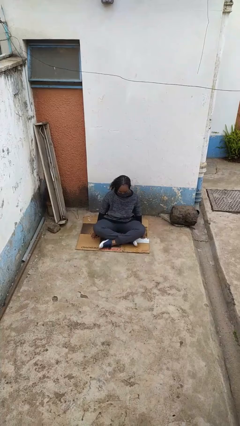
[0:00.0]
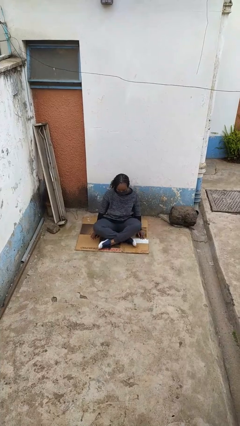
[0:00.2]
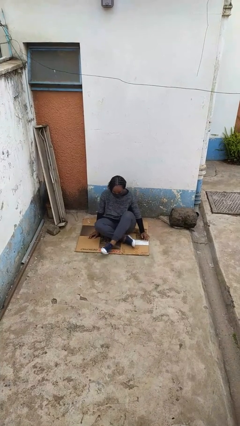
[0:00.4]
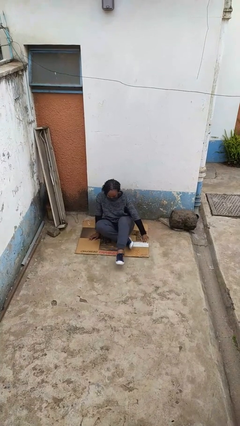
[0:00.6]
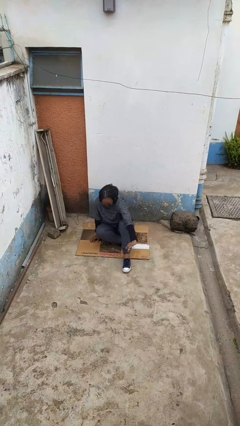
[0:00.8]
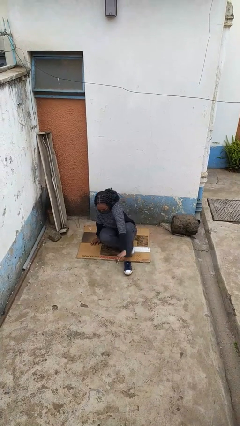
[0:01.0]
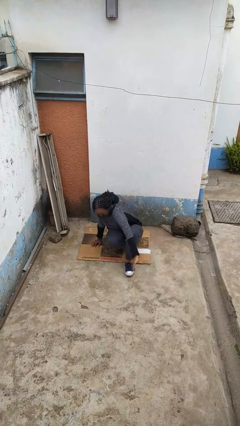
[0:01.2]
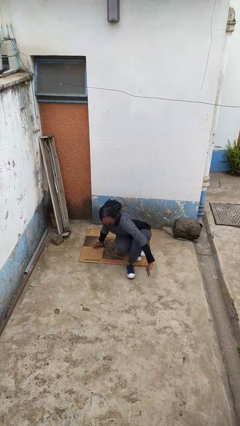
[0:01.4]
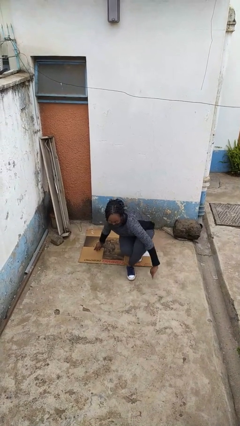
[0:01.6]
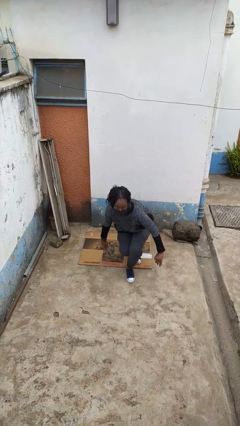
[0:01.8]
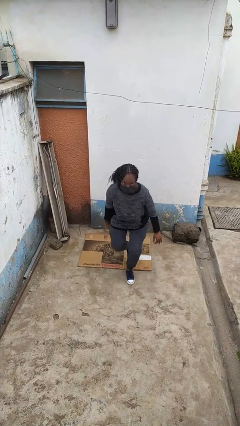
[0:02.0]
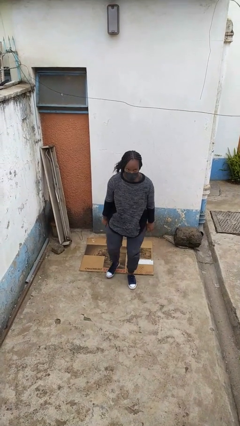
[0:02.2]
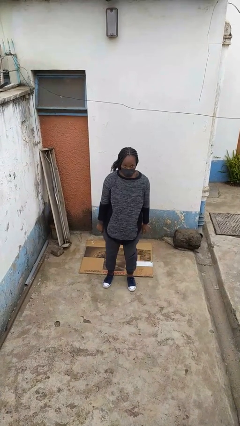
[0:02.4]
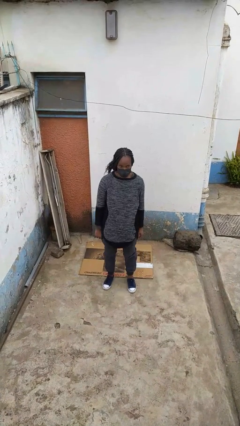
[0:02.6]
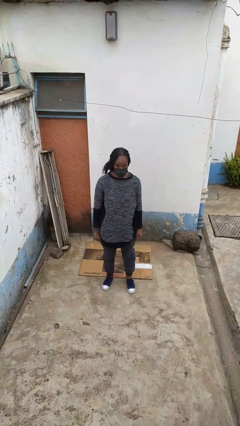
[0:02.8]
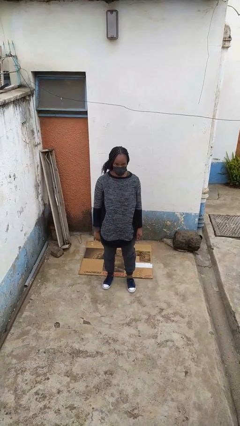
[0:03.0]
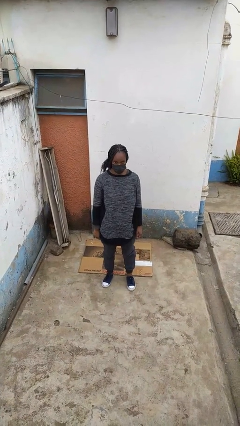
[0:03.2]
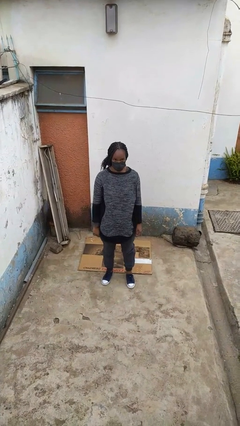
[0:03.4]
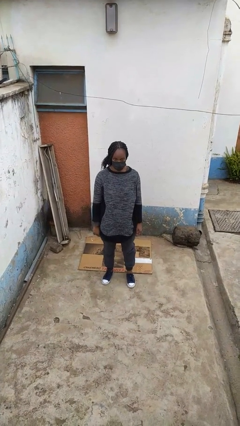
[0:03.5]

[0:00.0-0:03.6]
person stands up from floor

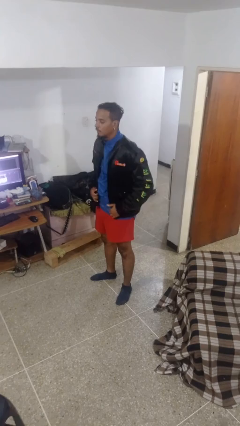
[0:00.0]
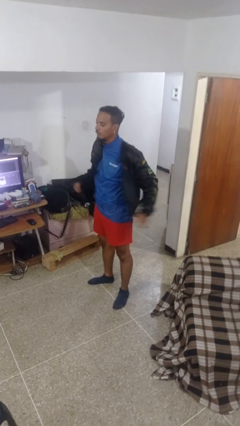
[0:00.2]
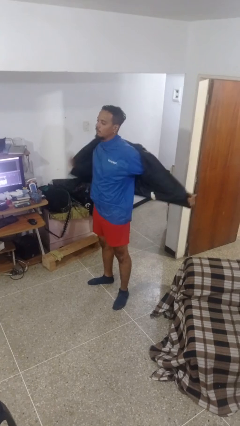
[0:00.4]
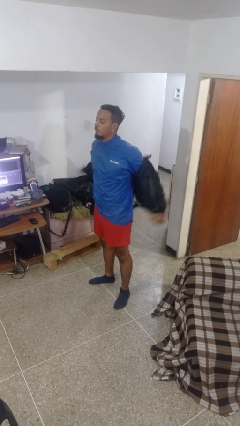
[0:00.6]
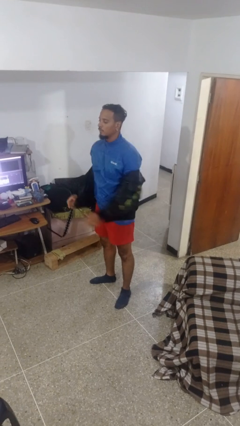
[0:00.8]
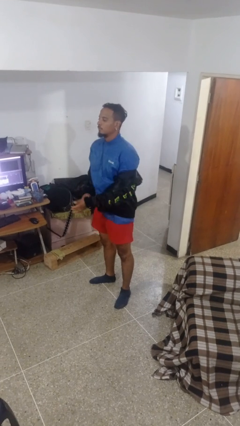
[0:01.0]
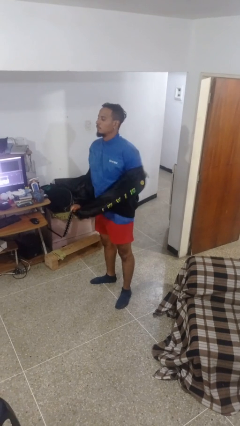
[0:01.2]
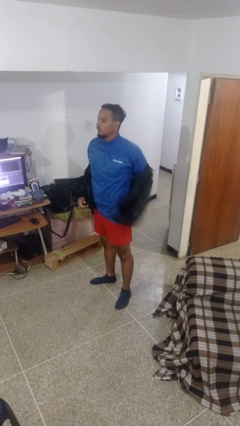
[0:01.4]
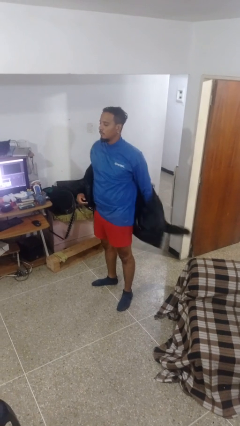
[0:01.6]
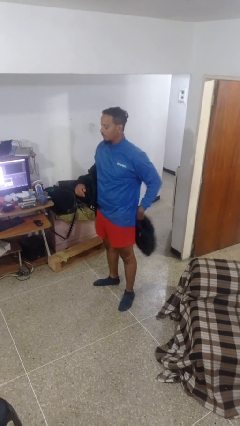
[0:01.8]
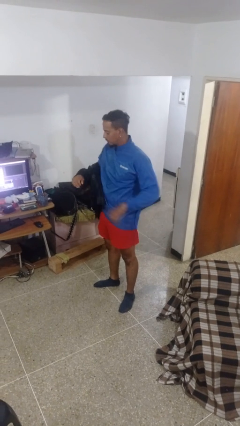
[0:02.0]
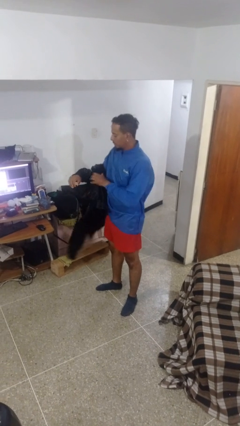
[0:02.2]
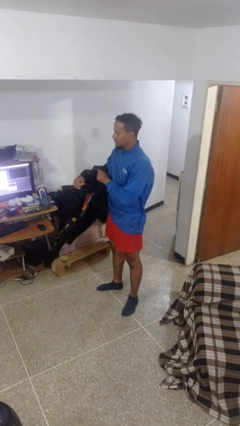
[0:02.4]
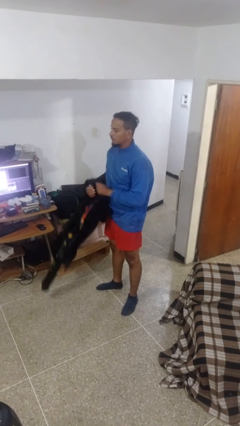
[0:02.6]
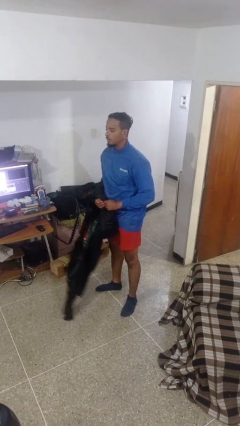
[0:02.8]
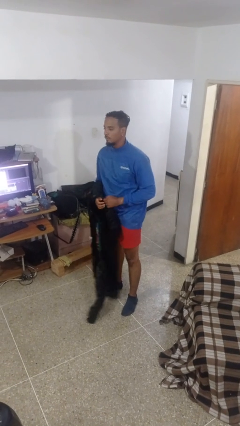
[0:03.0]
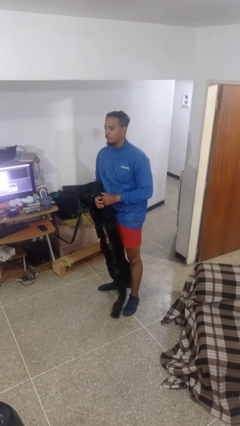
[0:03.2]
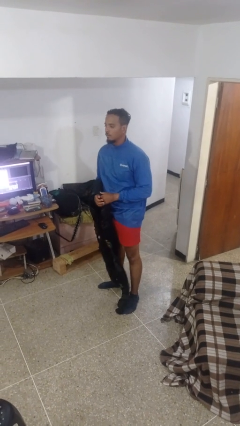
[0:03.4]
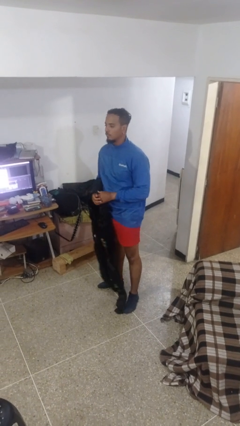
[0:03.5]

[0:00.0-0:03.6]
person takes off jacket

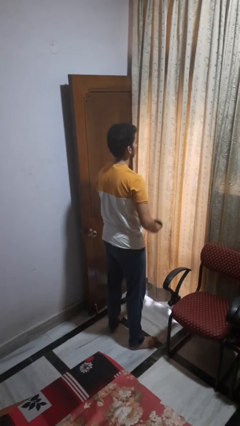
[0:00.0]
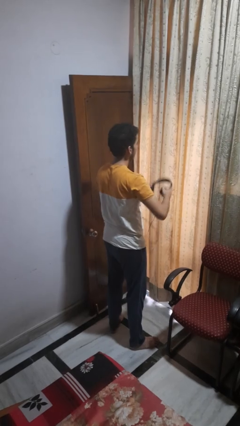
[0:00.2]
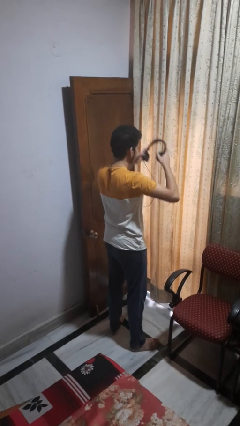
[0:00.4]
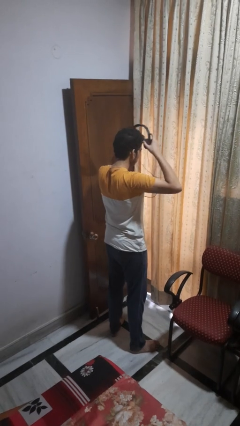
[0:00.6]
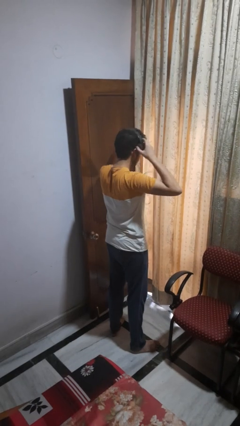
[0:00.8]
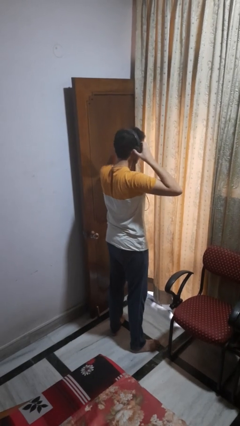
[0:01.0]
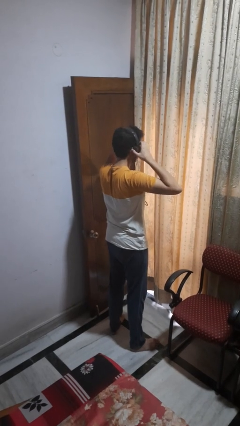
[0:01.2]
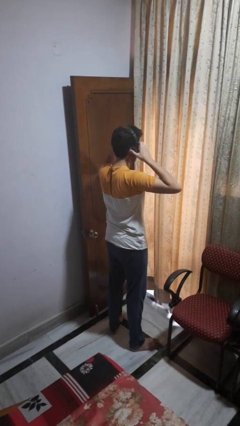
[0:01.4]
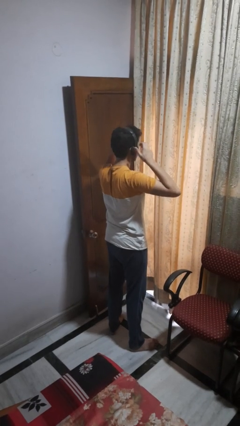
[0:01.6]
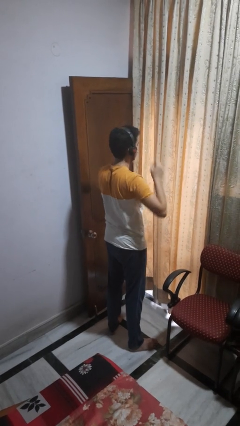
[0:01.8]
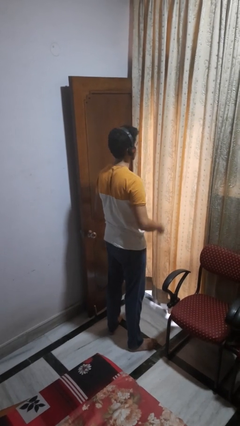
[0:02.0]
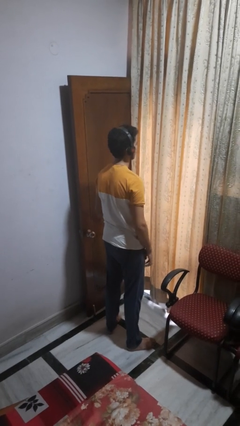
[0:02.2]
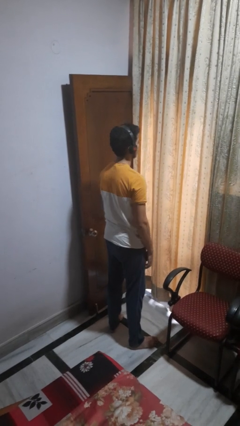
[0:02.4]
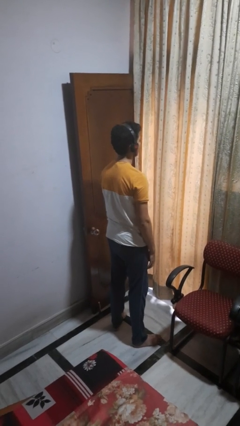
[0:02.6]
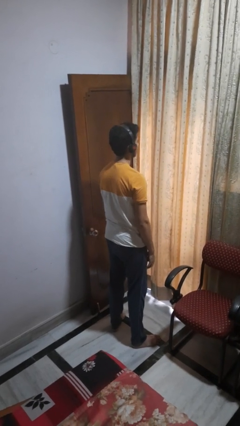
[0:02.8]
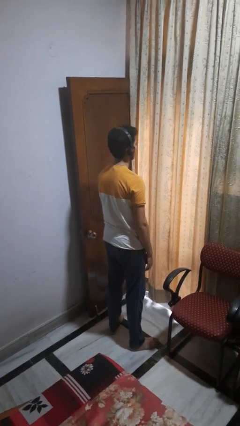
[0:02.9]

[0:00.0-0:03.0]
person puts on headphones

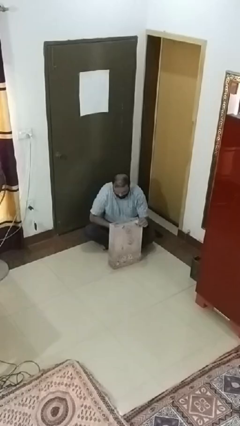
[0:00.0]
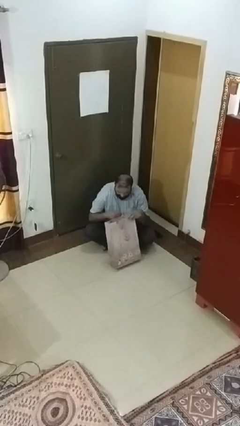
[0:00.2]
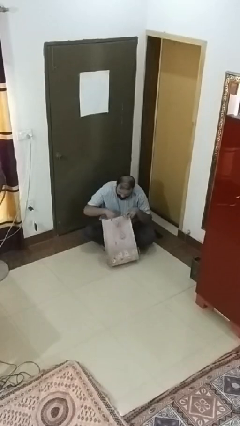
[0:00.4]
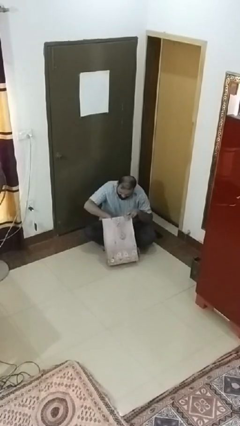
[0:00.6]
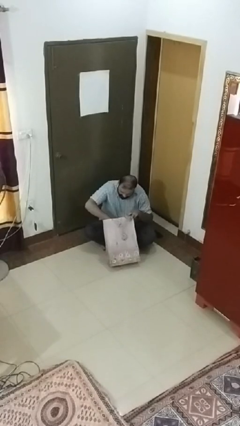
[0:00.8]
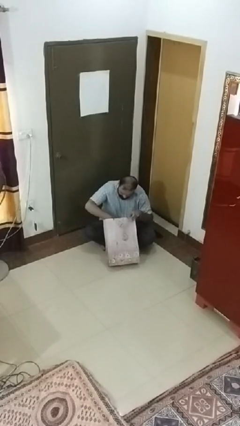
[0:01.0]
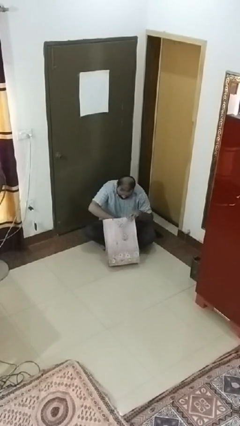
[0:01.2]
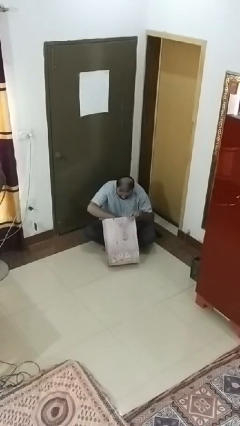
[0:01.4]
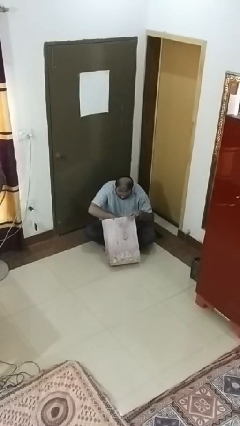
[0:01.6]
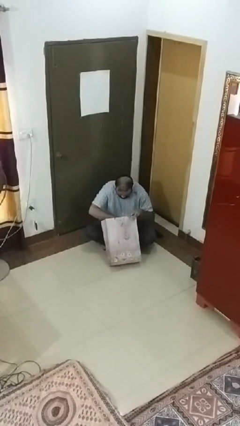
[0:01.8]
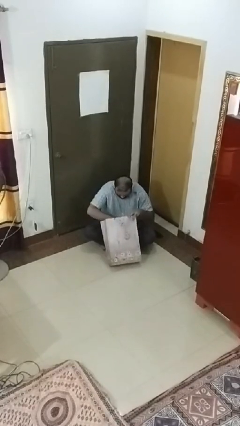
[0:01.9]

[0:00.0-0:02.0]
person searches under bed

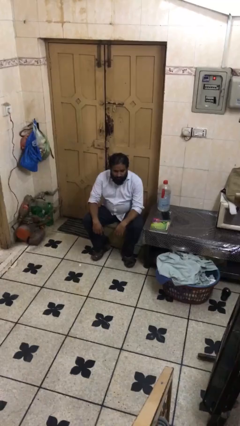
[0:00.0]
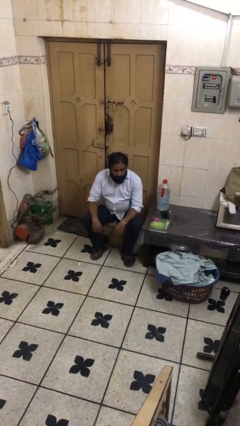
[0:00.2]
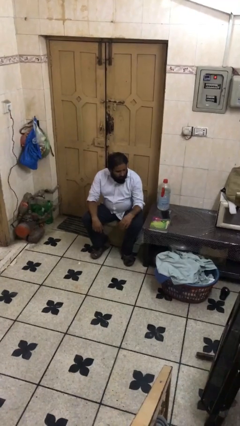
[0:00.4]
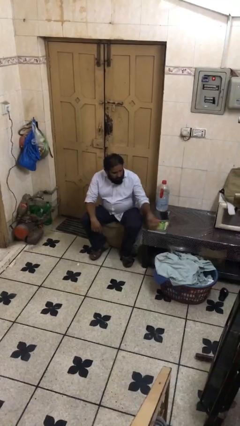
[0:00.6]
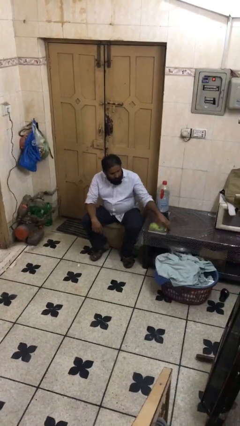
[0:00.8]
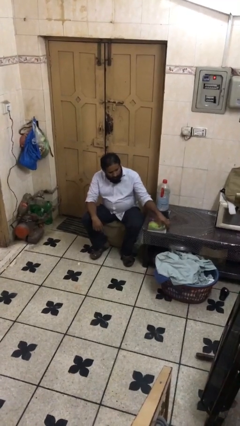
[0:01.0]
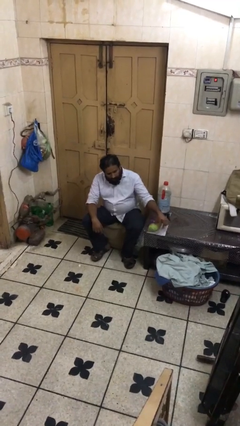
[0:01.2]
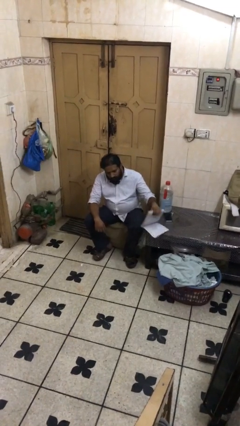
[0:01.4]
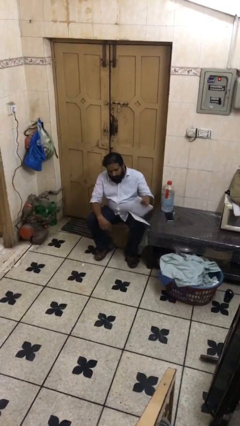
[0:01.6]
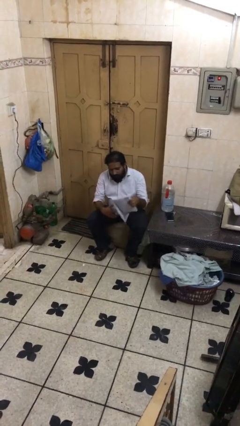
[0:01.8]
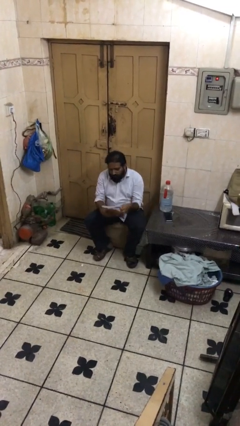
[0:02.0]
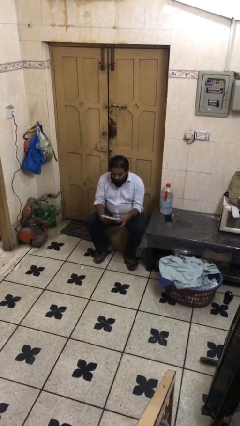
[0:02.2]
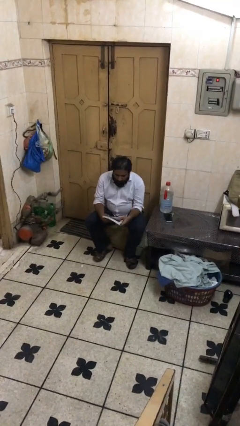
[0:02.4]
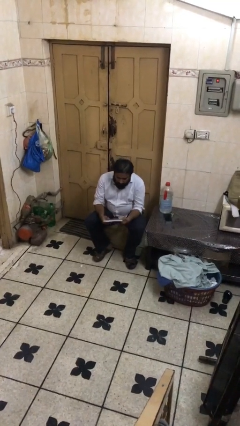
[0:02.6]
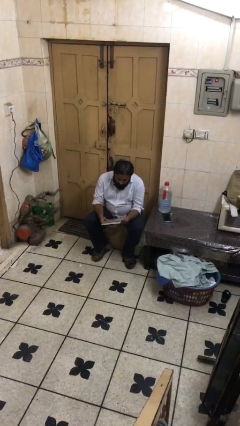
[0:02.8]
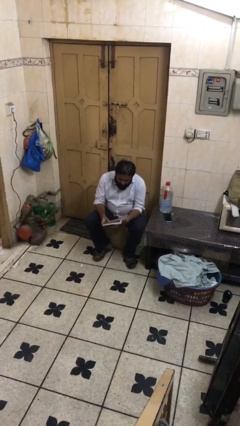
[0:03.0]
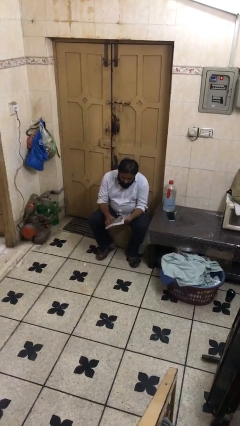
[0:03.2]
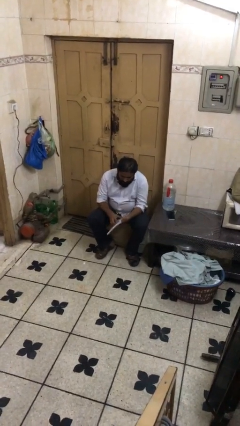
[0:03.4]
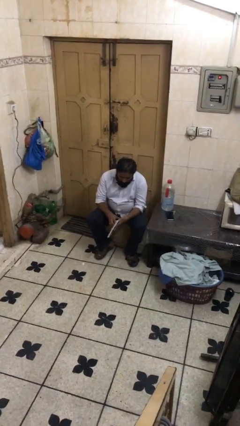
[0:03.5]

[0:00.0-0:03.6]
person picks up object from table

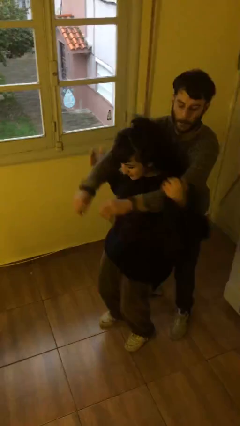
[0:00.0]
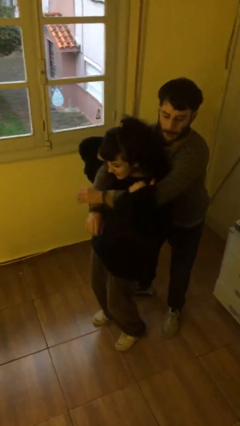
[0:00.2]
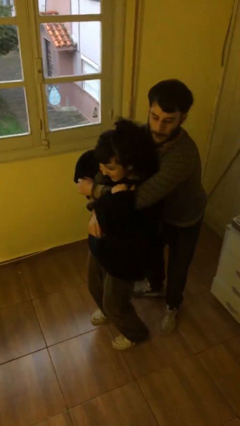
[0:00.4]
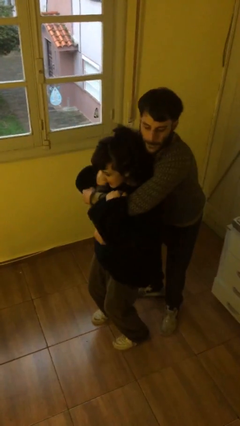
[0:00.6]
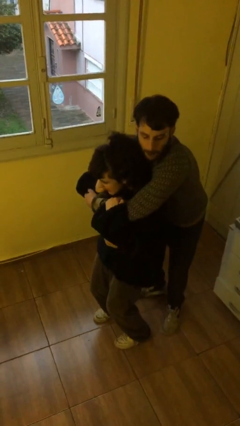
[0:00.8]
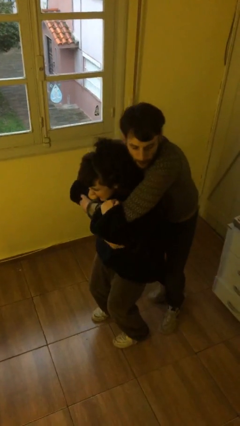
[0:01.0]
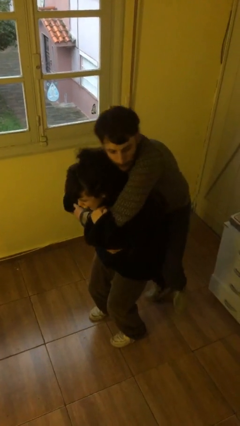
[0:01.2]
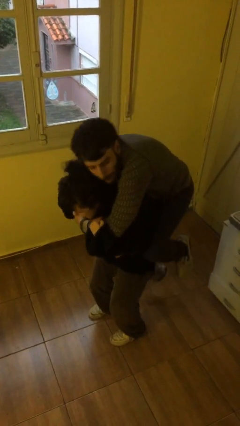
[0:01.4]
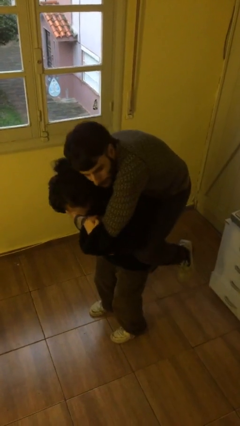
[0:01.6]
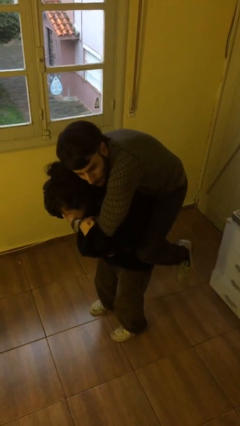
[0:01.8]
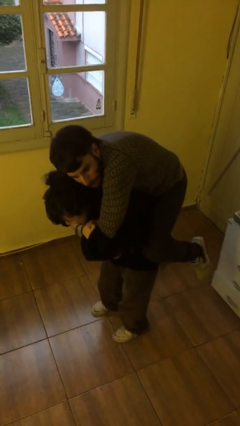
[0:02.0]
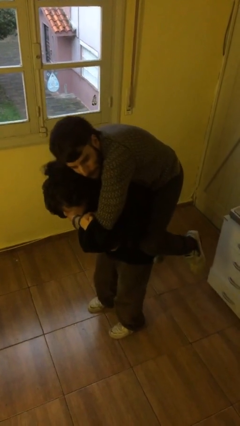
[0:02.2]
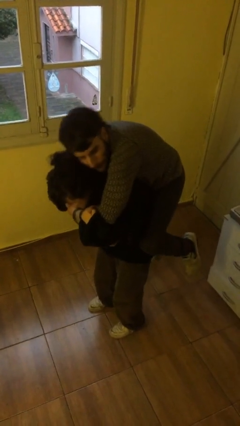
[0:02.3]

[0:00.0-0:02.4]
person picks up person
